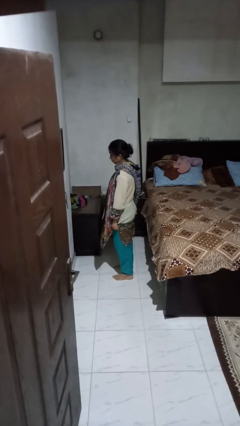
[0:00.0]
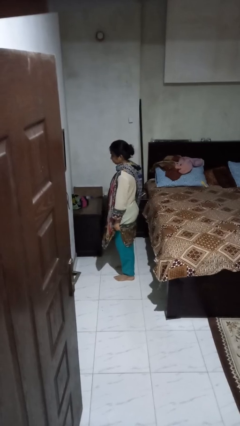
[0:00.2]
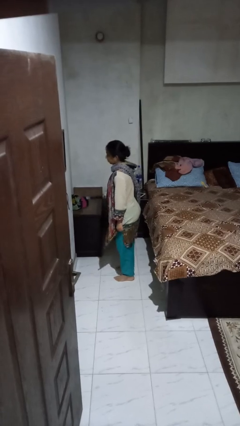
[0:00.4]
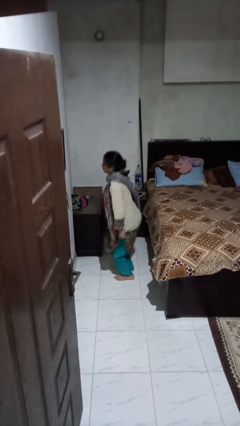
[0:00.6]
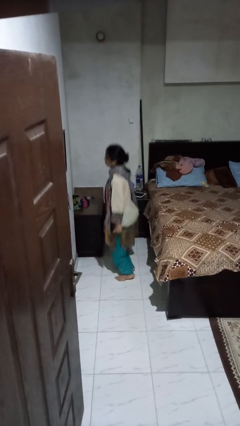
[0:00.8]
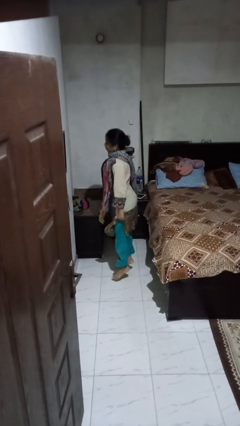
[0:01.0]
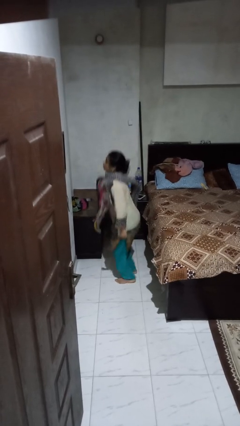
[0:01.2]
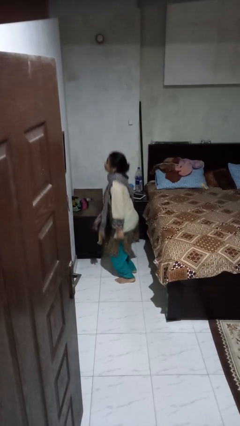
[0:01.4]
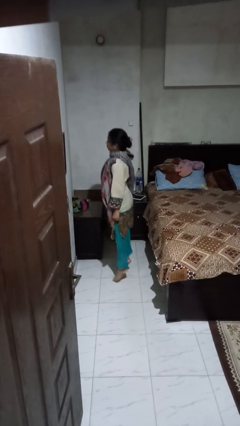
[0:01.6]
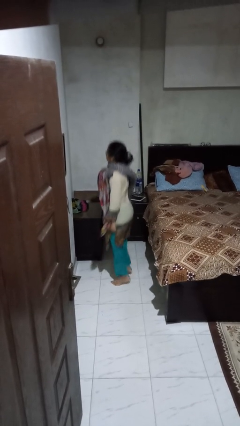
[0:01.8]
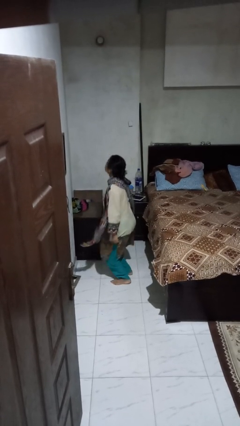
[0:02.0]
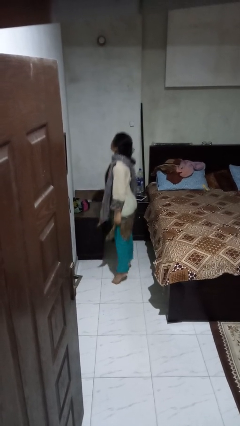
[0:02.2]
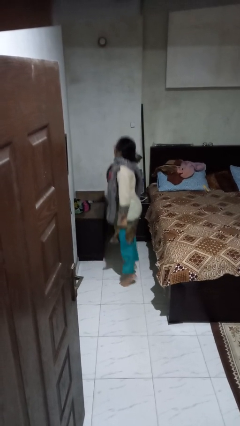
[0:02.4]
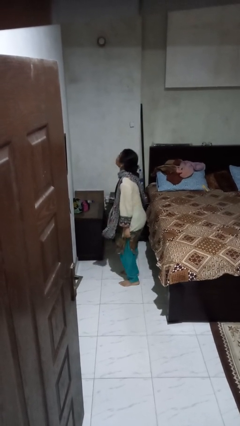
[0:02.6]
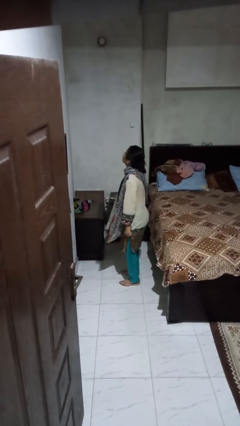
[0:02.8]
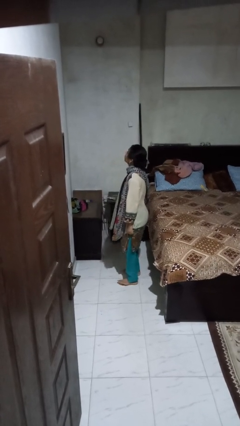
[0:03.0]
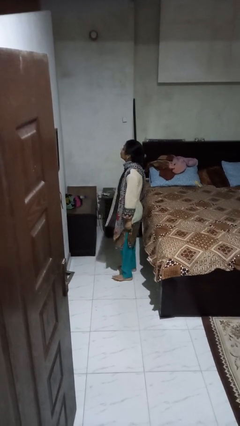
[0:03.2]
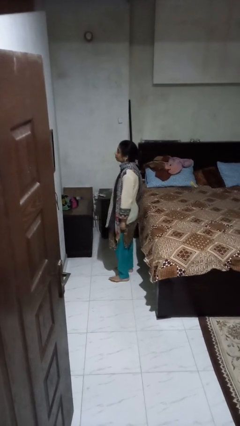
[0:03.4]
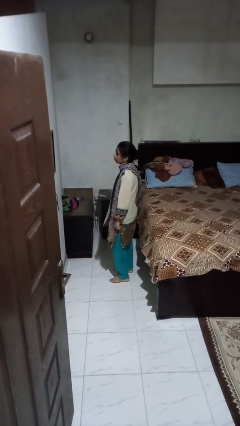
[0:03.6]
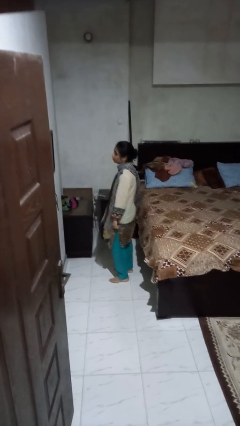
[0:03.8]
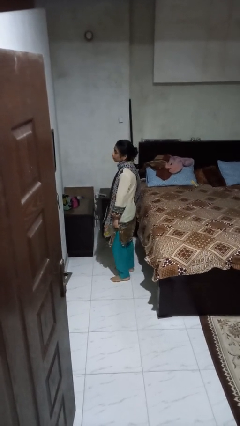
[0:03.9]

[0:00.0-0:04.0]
person jumps

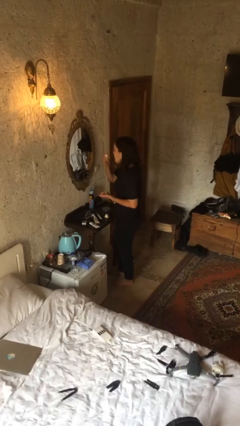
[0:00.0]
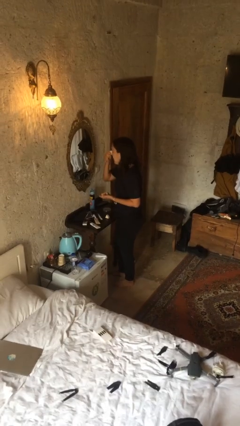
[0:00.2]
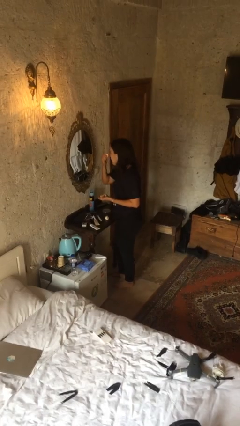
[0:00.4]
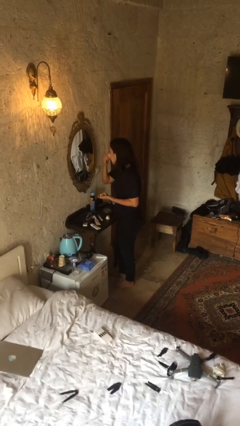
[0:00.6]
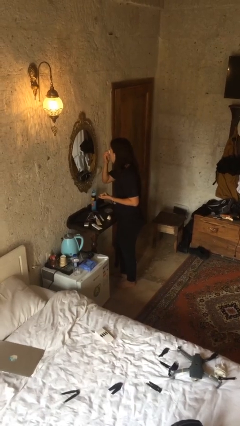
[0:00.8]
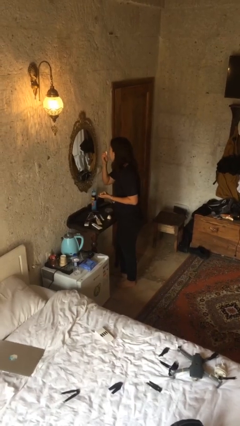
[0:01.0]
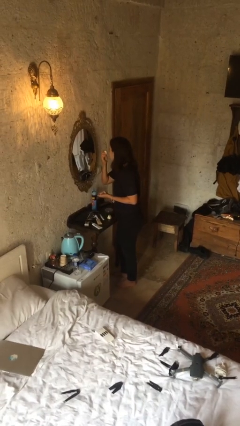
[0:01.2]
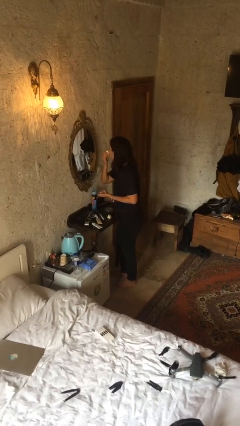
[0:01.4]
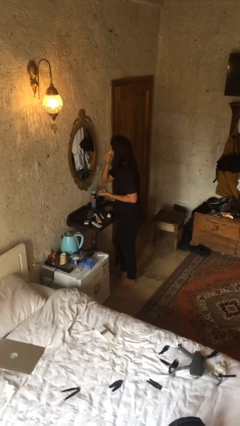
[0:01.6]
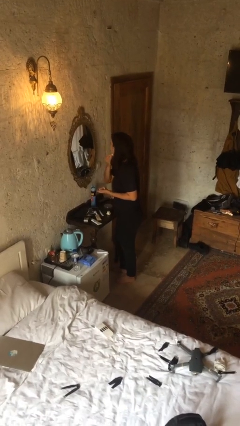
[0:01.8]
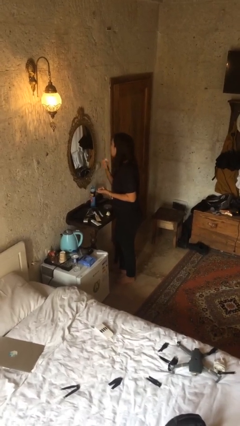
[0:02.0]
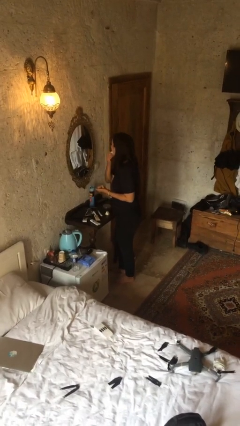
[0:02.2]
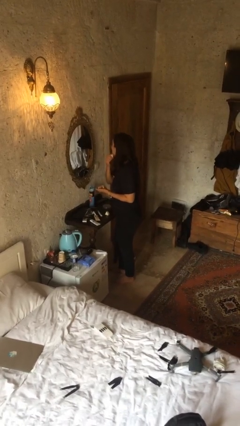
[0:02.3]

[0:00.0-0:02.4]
person applies foundation makeup

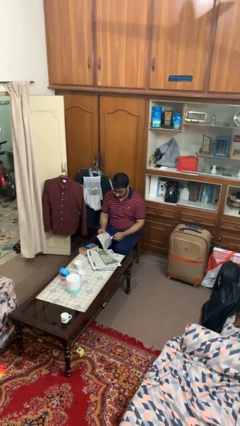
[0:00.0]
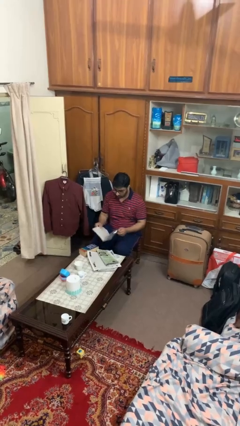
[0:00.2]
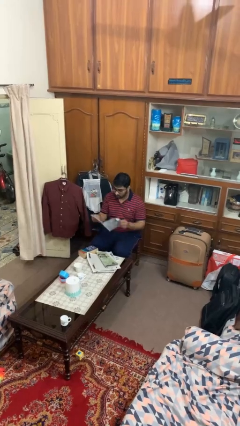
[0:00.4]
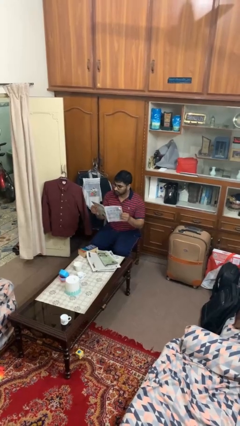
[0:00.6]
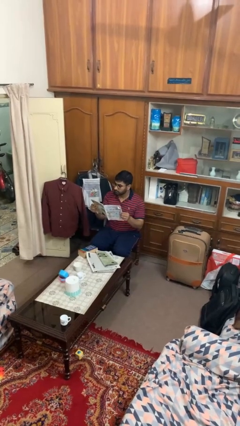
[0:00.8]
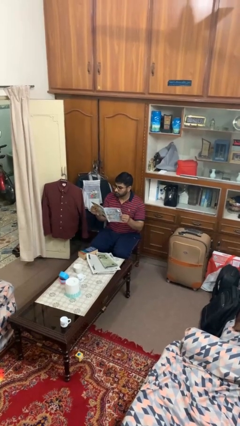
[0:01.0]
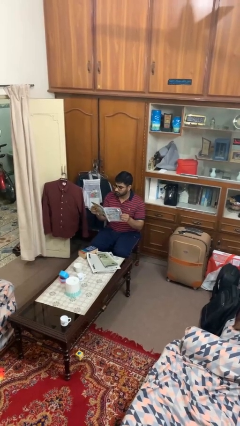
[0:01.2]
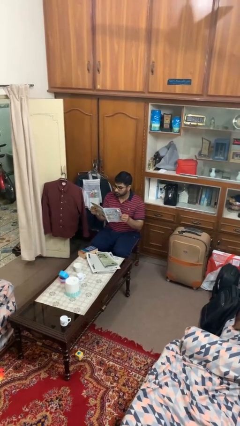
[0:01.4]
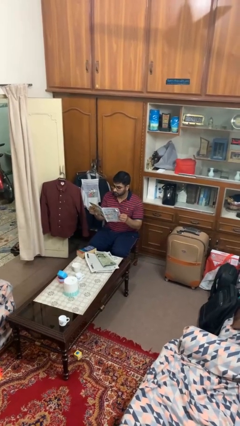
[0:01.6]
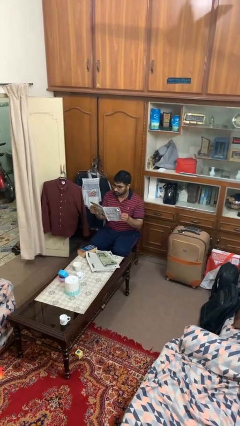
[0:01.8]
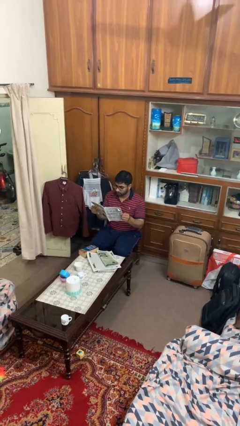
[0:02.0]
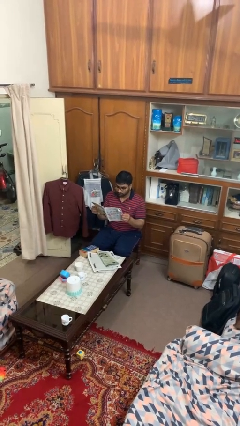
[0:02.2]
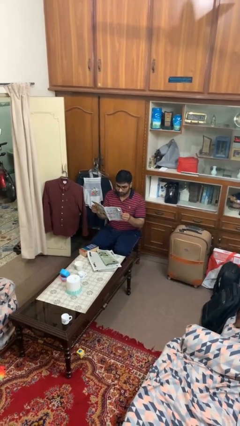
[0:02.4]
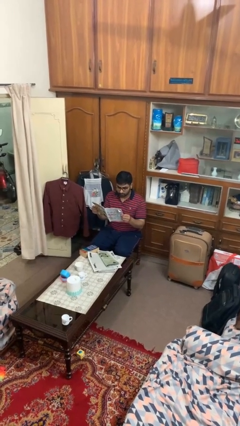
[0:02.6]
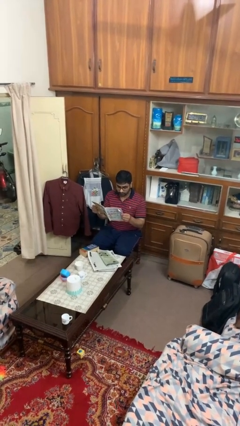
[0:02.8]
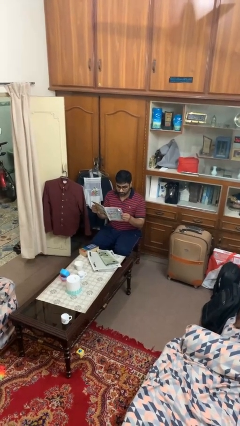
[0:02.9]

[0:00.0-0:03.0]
person reads magazine

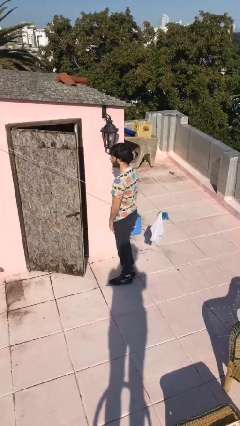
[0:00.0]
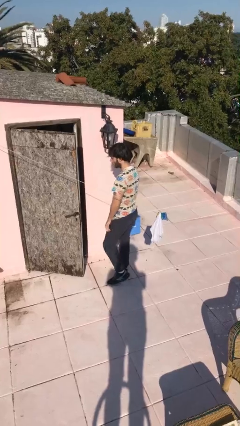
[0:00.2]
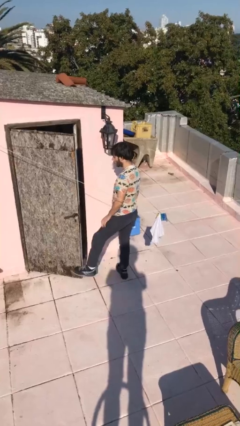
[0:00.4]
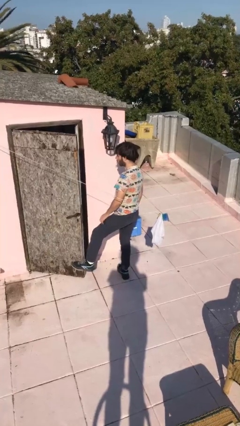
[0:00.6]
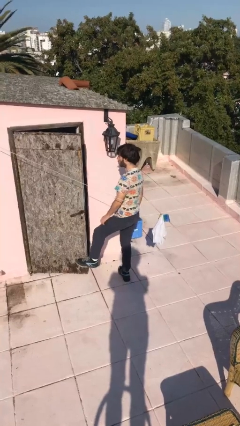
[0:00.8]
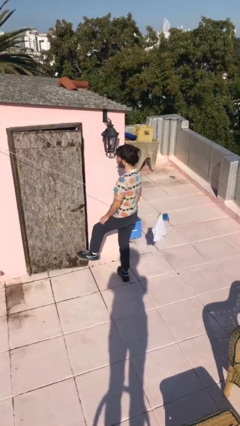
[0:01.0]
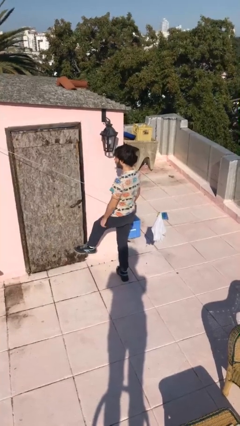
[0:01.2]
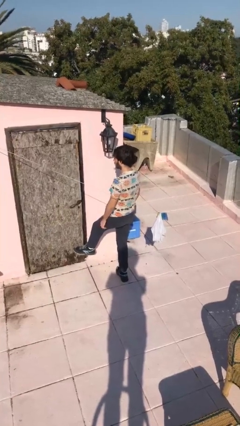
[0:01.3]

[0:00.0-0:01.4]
person closes door with foot

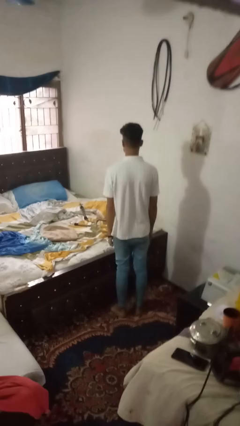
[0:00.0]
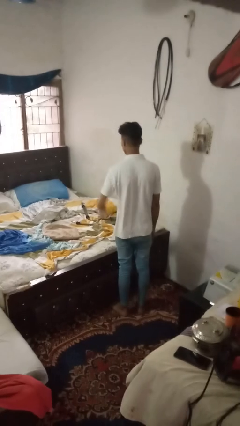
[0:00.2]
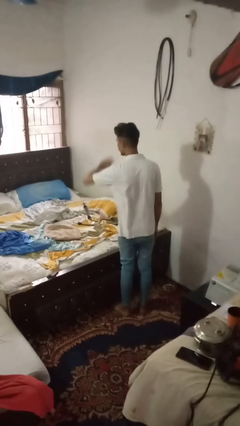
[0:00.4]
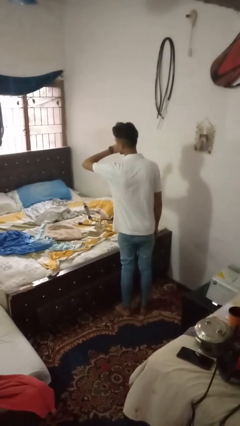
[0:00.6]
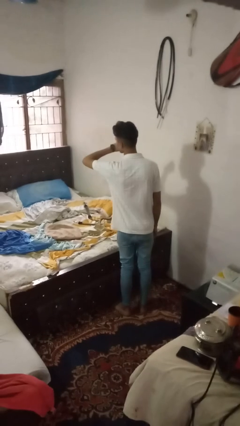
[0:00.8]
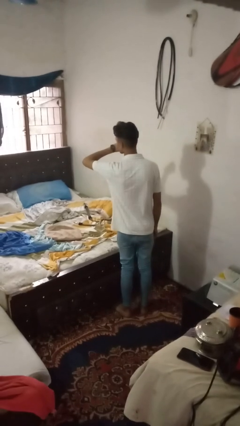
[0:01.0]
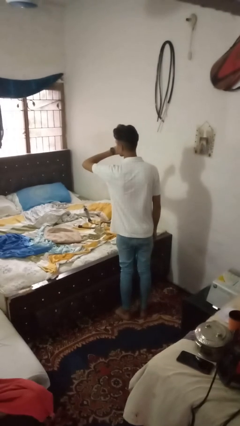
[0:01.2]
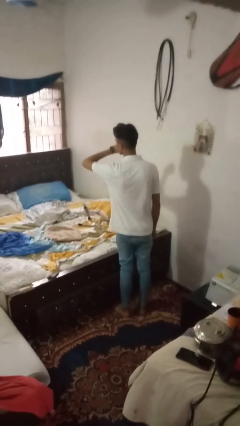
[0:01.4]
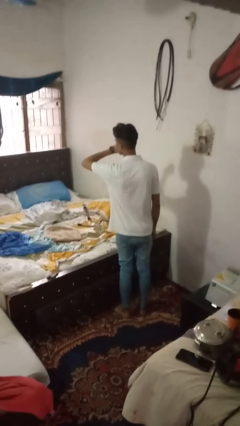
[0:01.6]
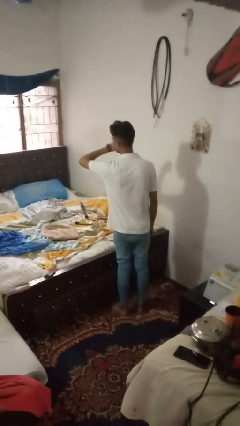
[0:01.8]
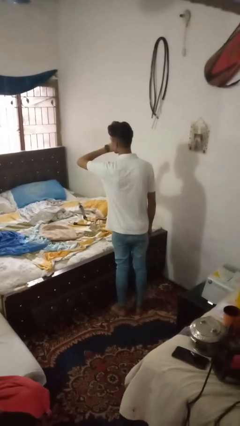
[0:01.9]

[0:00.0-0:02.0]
person gestures watch closely

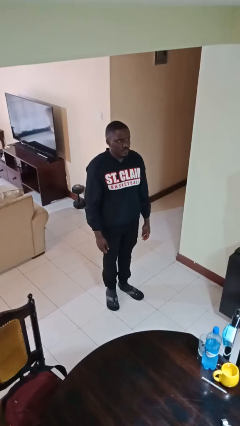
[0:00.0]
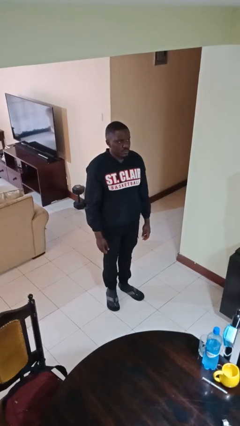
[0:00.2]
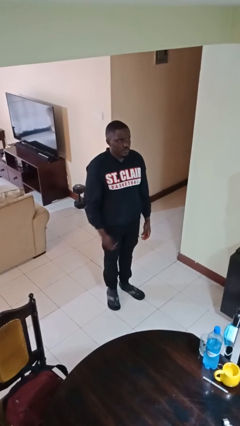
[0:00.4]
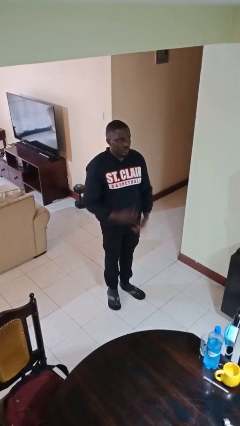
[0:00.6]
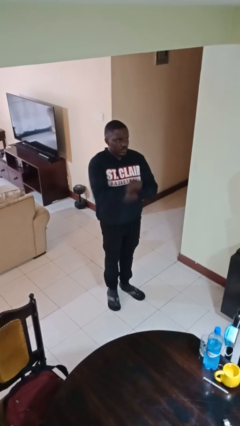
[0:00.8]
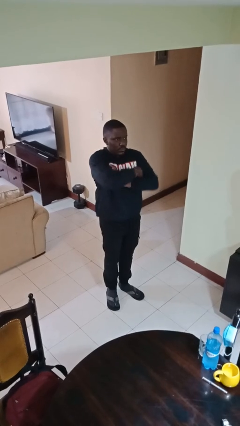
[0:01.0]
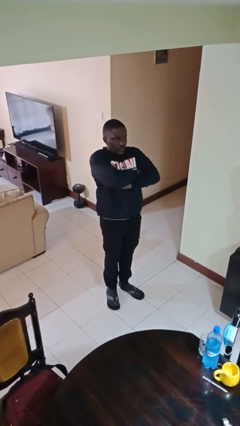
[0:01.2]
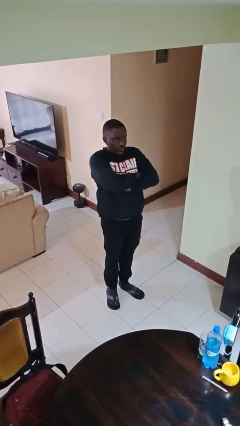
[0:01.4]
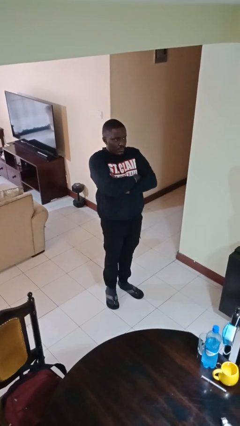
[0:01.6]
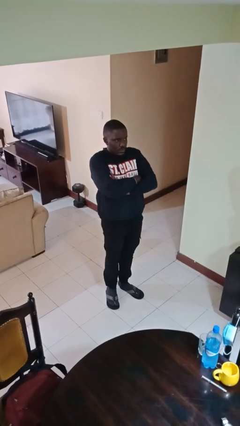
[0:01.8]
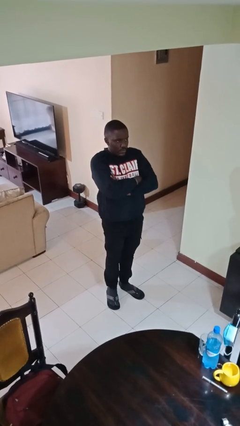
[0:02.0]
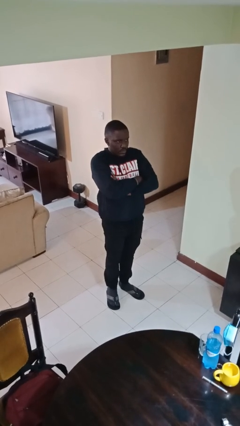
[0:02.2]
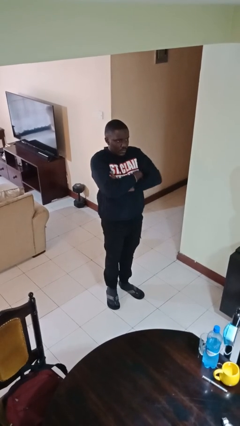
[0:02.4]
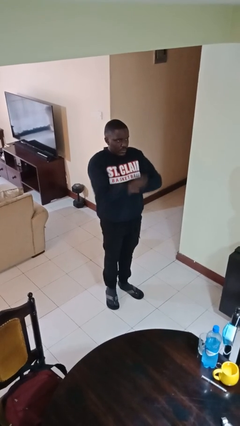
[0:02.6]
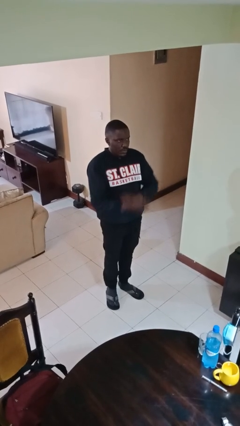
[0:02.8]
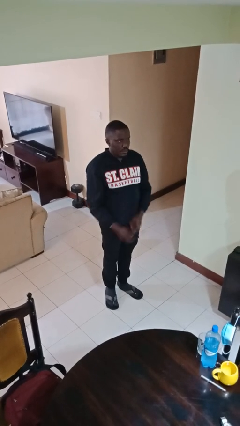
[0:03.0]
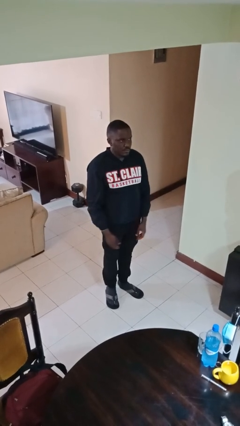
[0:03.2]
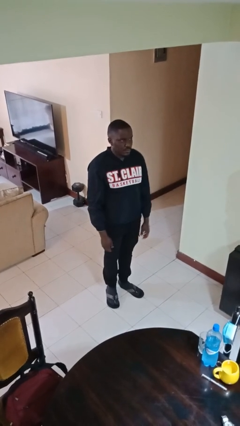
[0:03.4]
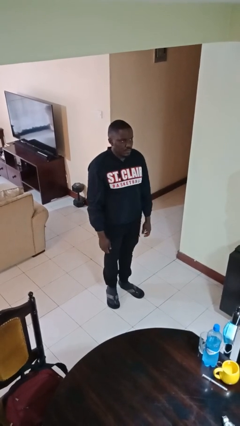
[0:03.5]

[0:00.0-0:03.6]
person crosses arms

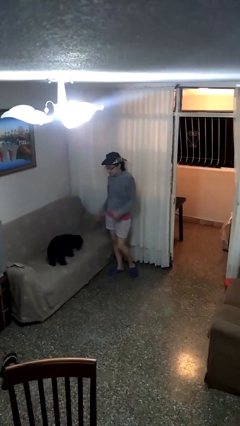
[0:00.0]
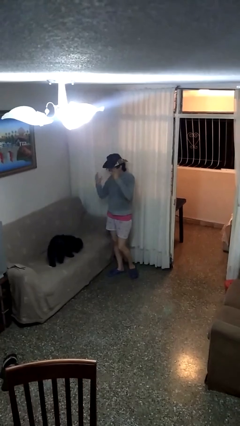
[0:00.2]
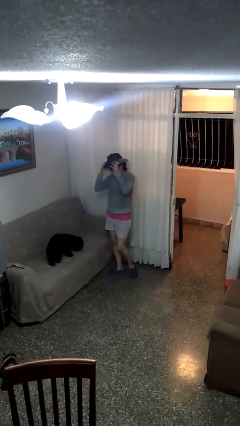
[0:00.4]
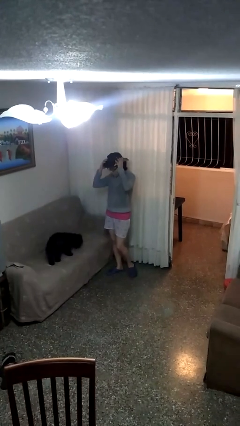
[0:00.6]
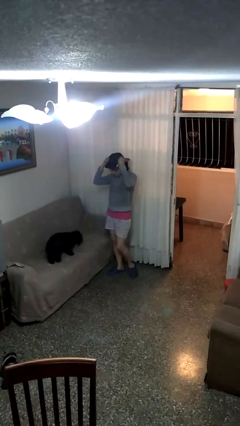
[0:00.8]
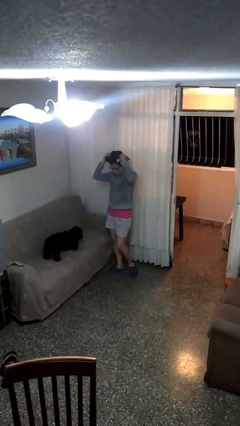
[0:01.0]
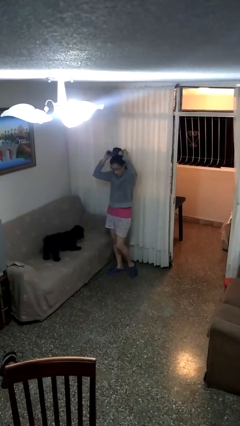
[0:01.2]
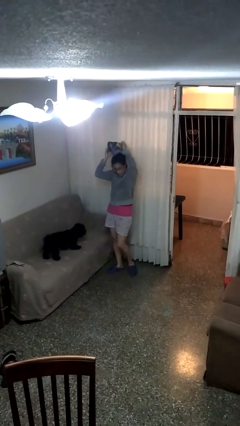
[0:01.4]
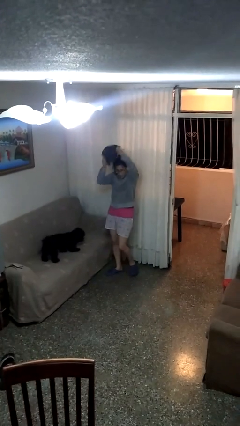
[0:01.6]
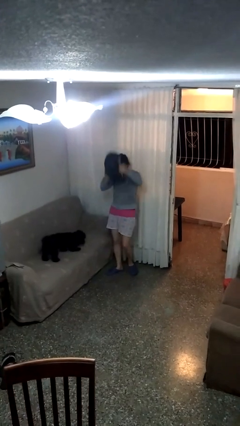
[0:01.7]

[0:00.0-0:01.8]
person takes off hat
